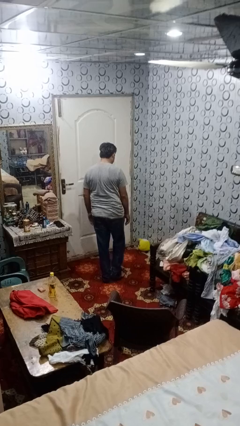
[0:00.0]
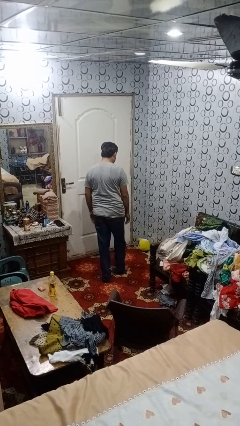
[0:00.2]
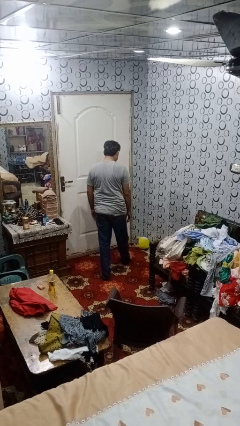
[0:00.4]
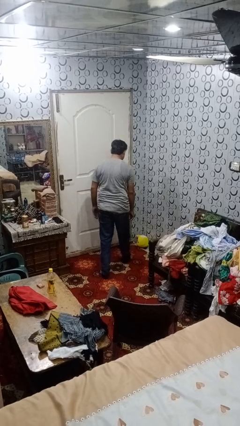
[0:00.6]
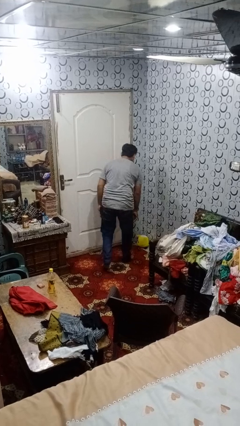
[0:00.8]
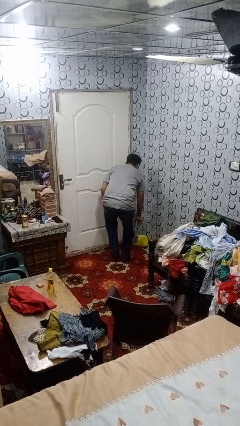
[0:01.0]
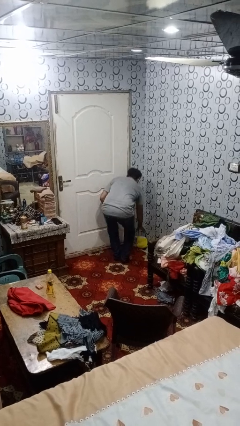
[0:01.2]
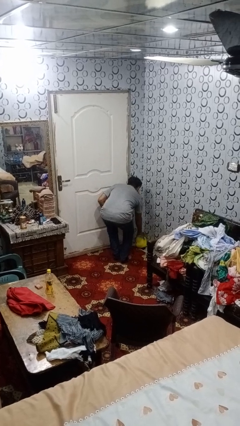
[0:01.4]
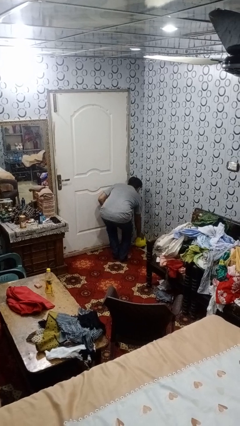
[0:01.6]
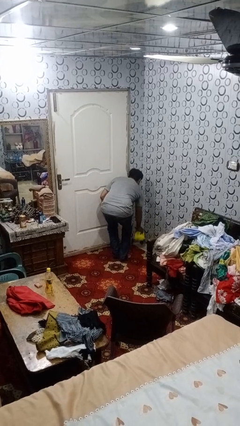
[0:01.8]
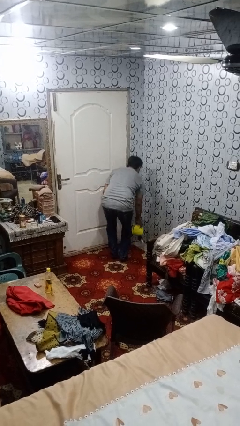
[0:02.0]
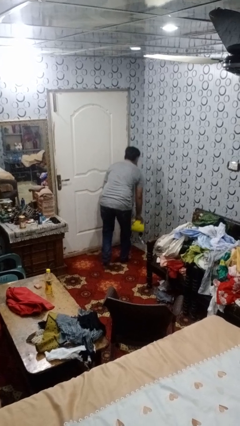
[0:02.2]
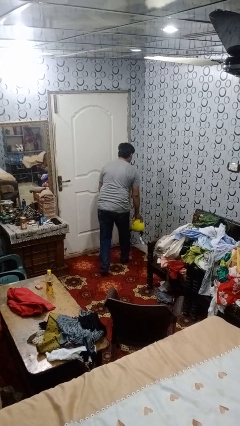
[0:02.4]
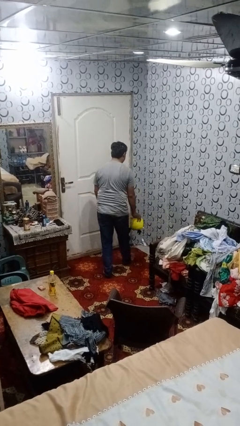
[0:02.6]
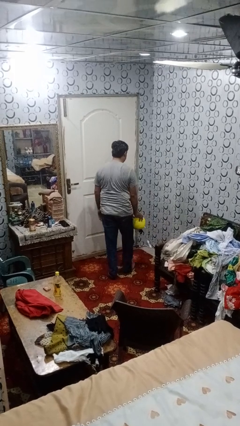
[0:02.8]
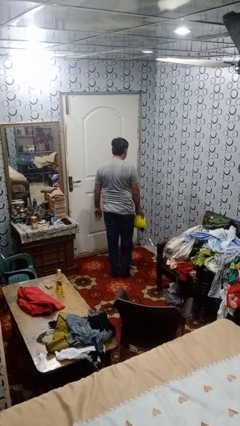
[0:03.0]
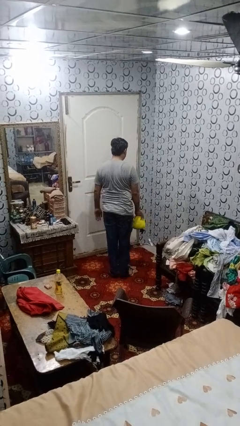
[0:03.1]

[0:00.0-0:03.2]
person picks up object from floor

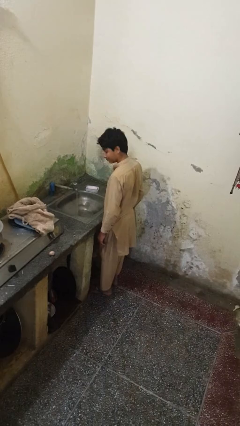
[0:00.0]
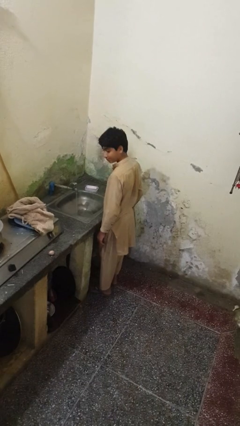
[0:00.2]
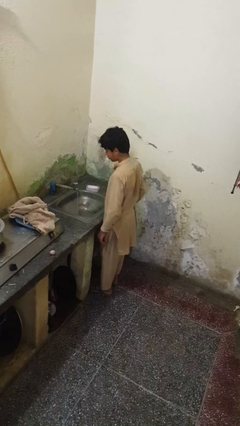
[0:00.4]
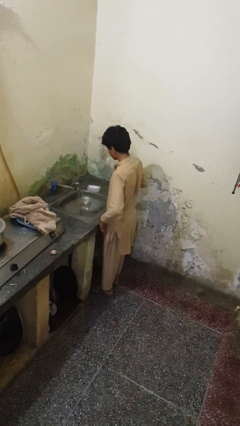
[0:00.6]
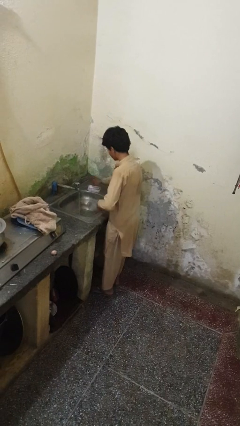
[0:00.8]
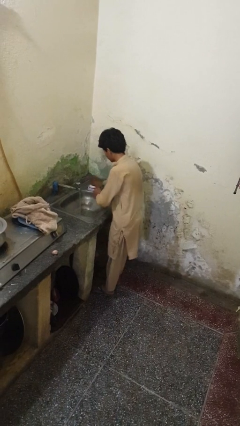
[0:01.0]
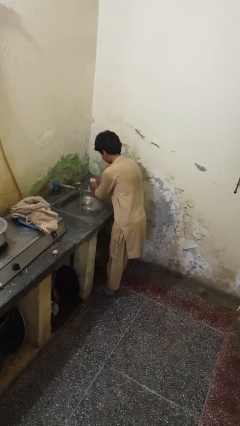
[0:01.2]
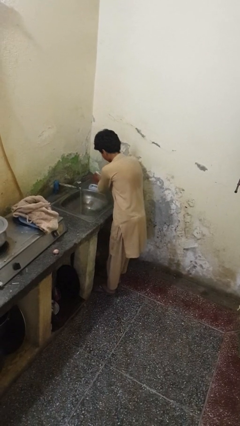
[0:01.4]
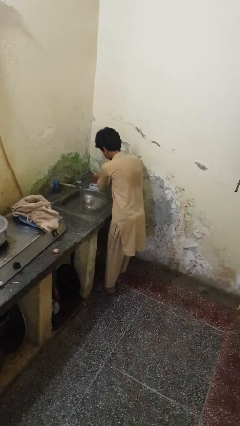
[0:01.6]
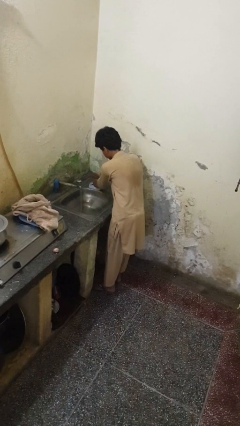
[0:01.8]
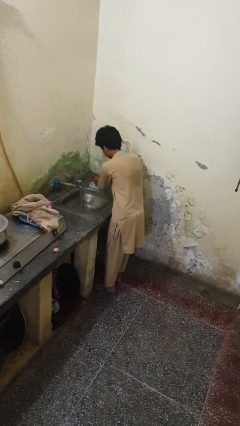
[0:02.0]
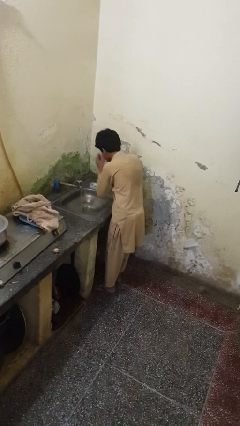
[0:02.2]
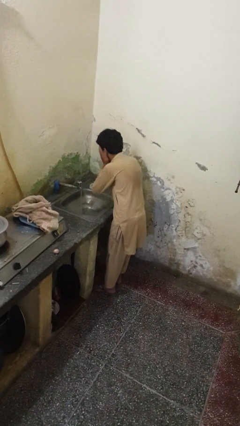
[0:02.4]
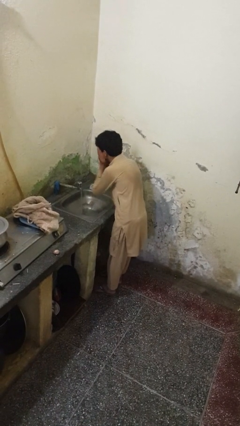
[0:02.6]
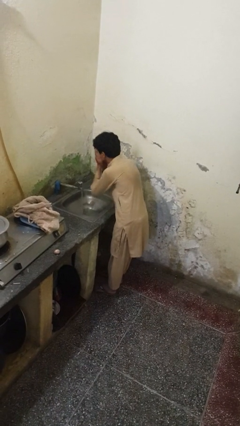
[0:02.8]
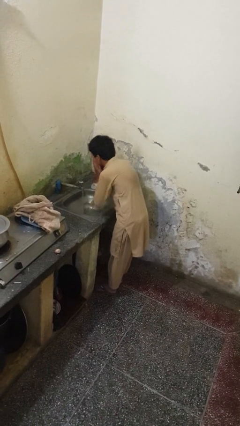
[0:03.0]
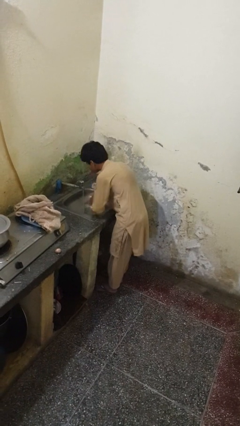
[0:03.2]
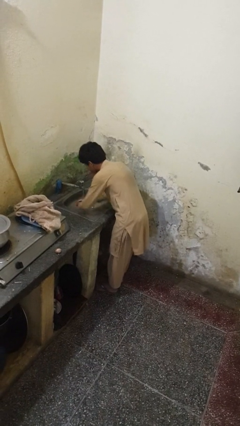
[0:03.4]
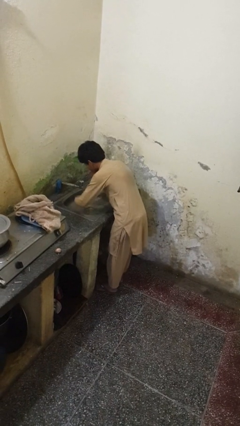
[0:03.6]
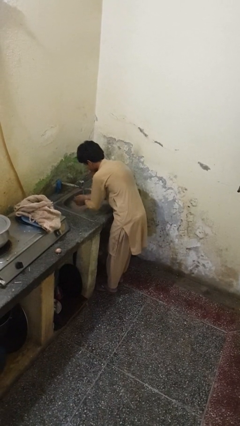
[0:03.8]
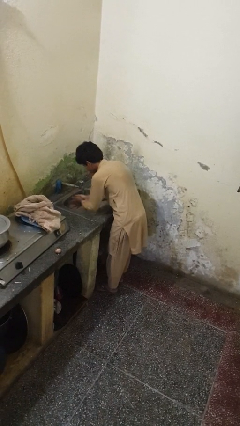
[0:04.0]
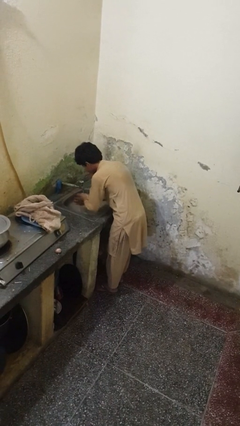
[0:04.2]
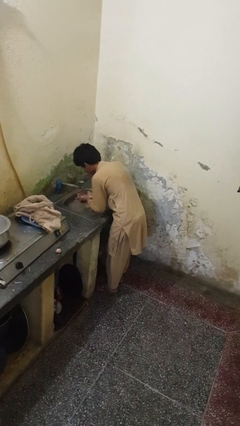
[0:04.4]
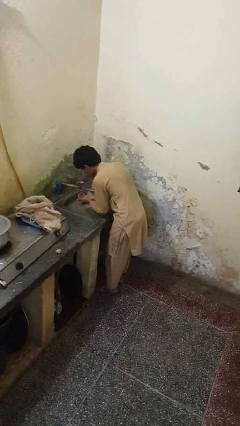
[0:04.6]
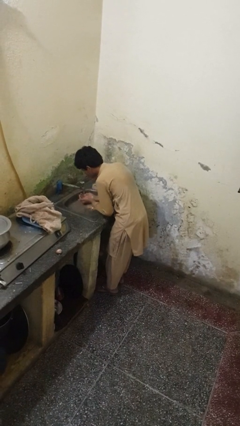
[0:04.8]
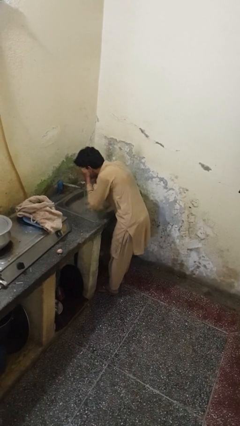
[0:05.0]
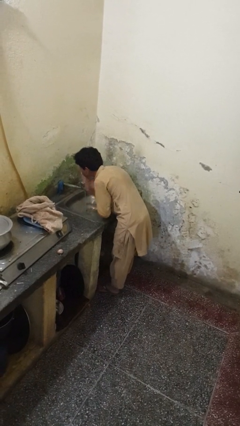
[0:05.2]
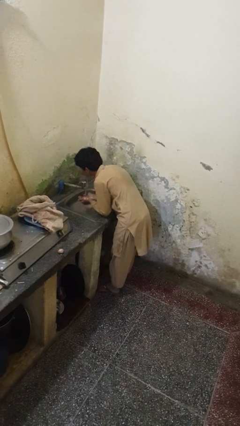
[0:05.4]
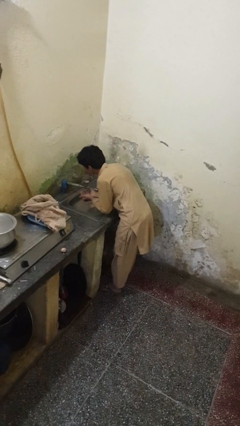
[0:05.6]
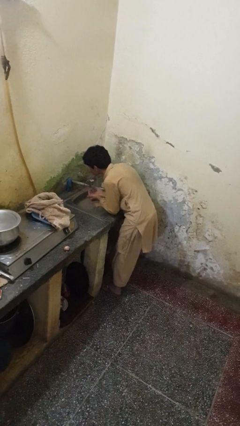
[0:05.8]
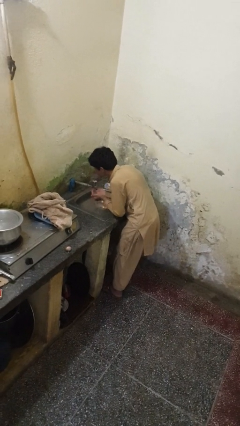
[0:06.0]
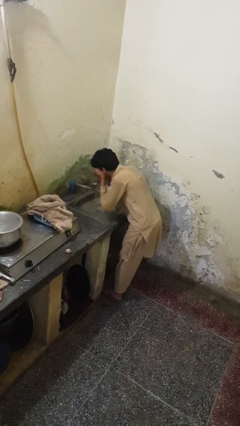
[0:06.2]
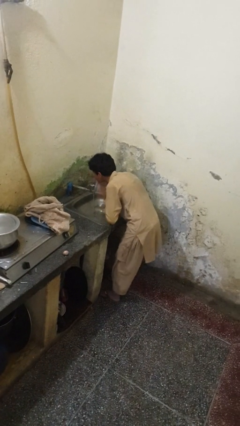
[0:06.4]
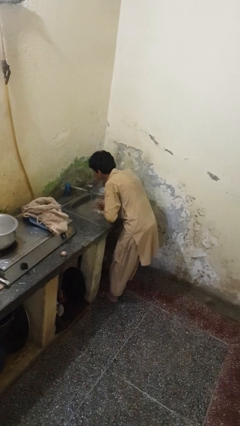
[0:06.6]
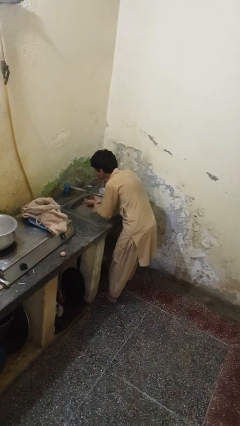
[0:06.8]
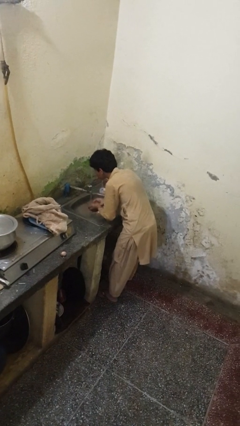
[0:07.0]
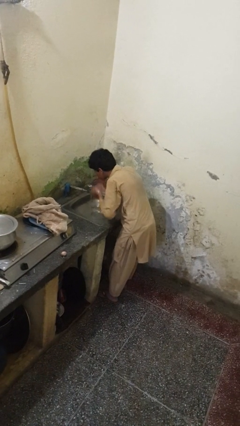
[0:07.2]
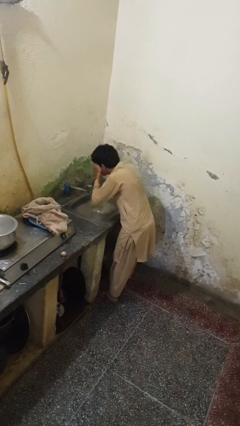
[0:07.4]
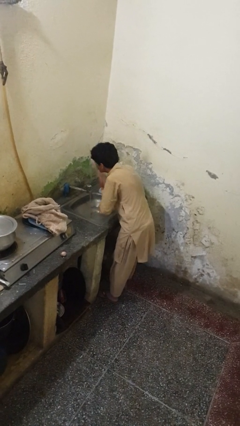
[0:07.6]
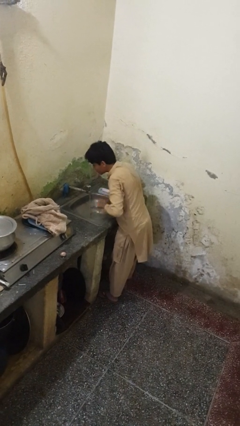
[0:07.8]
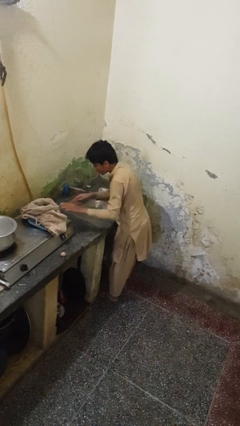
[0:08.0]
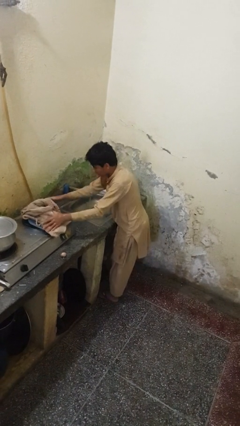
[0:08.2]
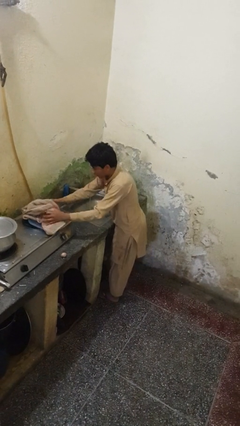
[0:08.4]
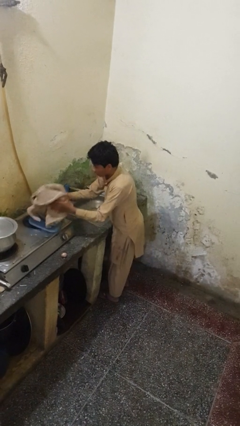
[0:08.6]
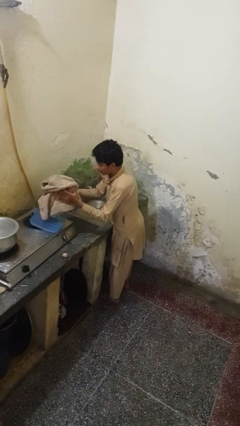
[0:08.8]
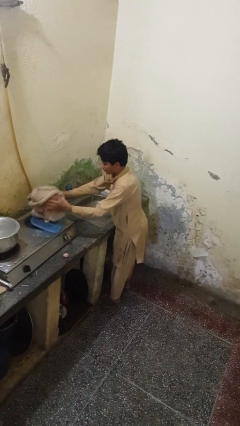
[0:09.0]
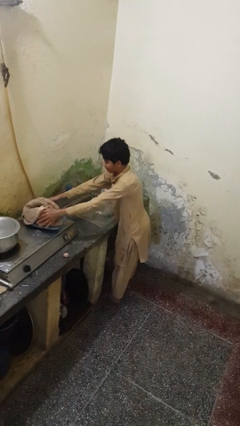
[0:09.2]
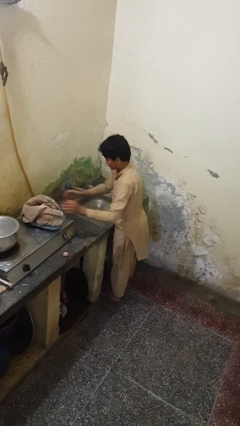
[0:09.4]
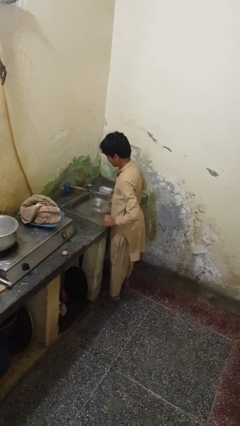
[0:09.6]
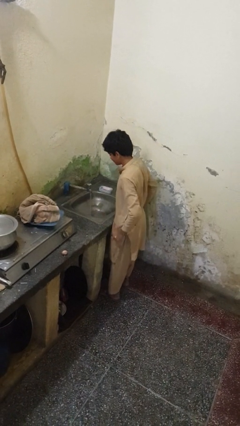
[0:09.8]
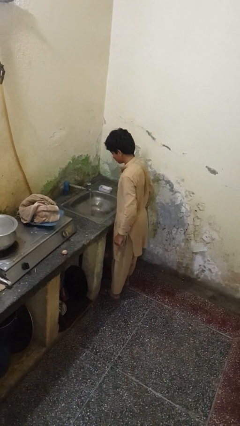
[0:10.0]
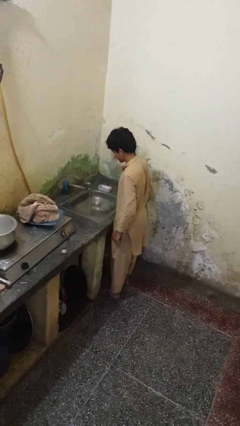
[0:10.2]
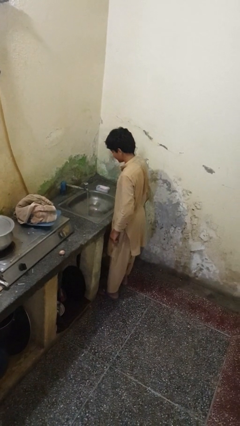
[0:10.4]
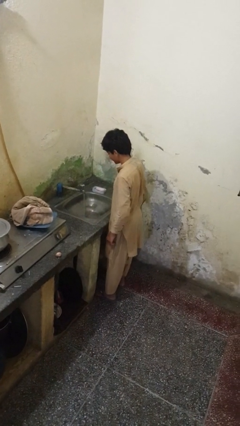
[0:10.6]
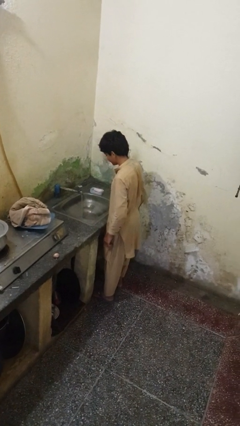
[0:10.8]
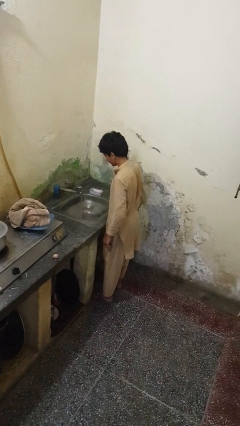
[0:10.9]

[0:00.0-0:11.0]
person washes face

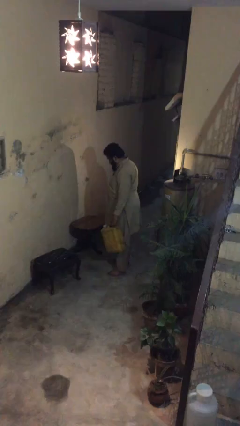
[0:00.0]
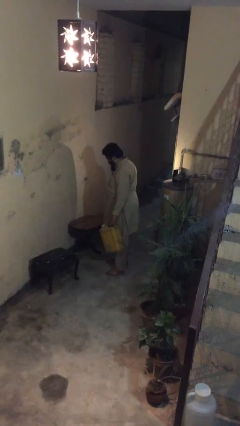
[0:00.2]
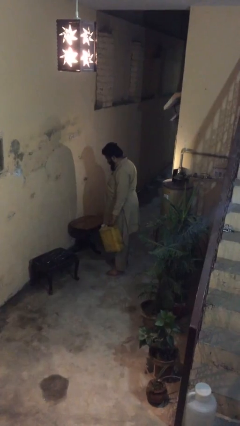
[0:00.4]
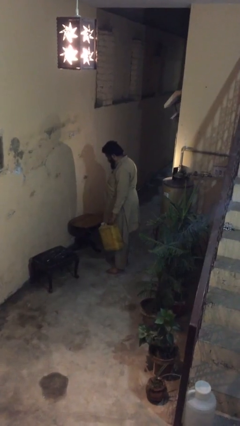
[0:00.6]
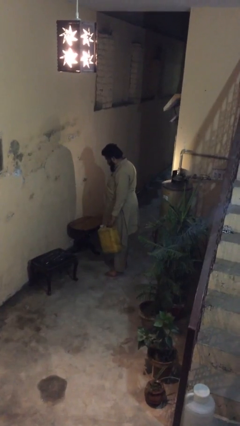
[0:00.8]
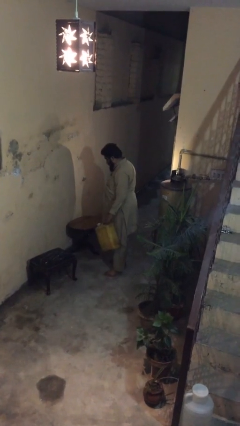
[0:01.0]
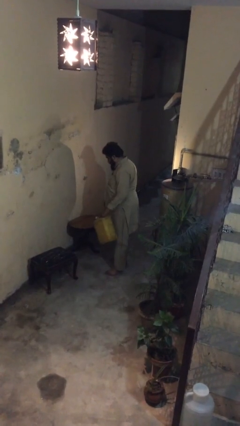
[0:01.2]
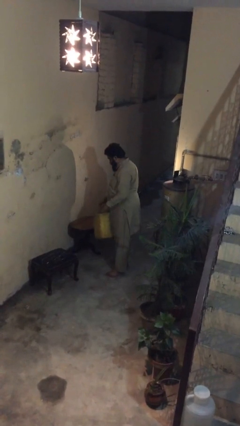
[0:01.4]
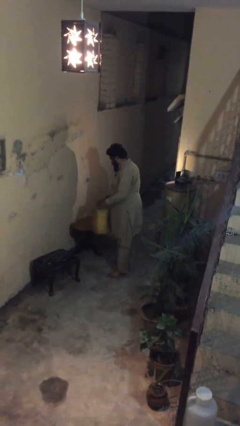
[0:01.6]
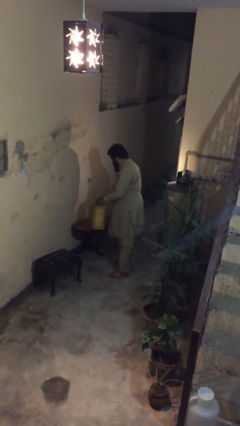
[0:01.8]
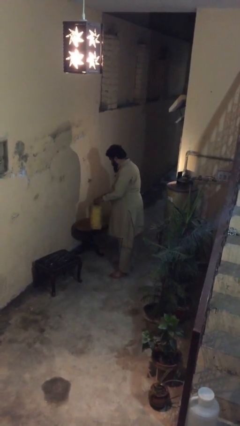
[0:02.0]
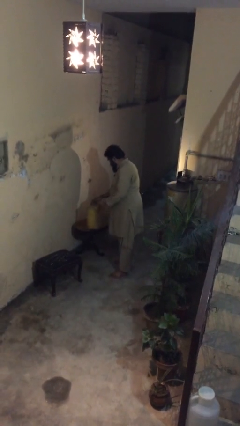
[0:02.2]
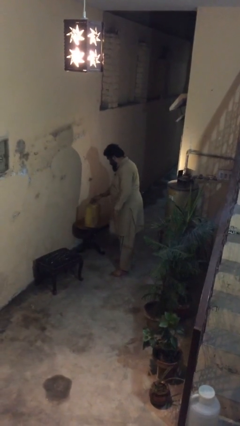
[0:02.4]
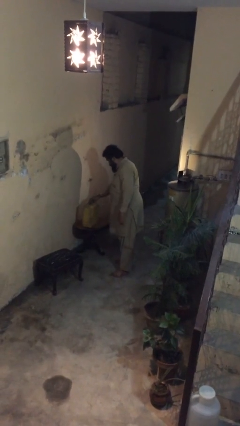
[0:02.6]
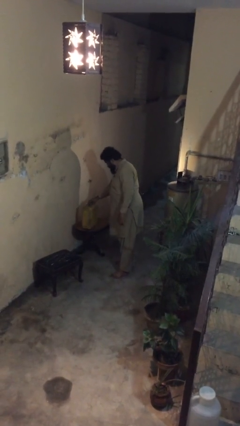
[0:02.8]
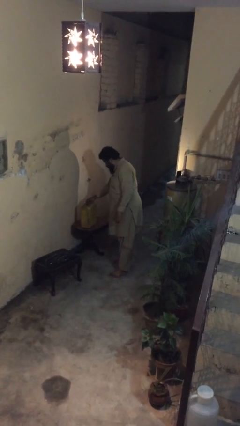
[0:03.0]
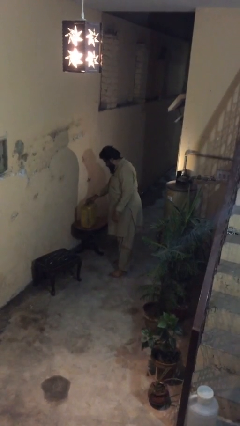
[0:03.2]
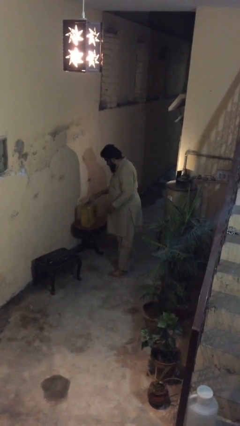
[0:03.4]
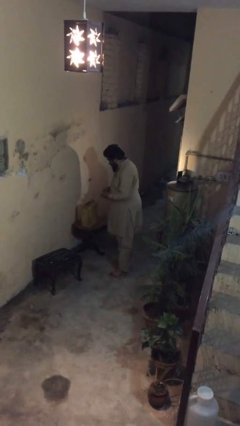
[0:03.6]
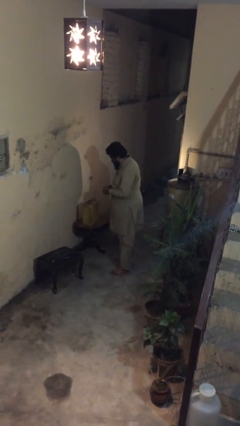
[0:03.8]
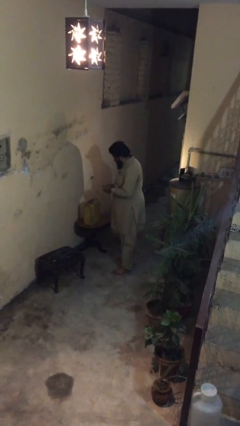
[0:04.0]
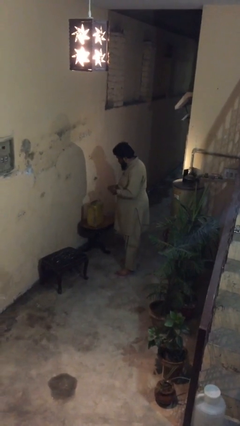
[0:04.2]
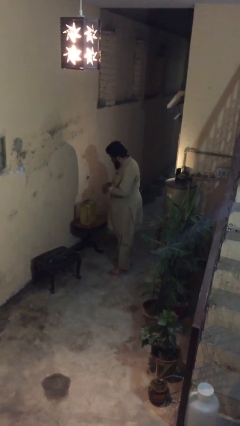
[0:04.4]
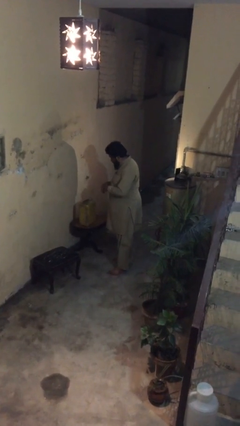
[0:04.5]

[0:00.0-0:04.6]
person puts down object on table
